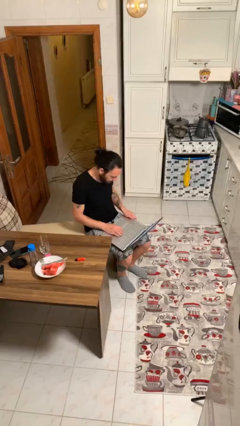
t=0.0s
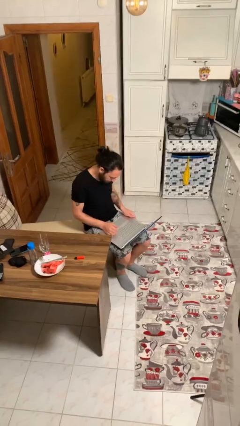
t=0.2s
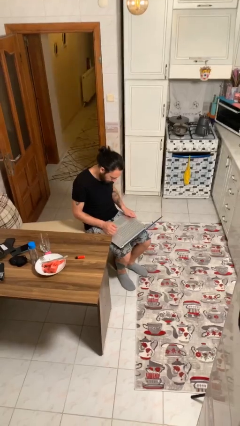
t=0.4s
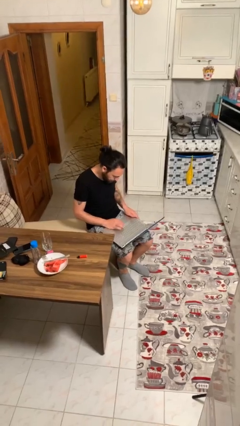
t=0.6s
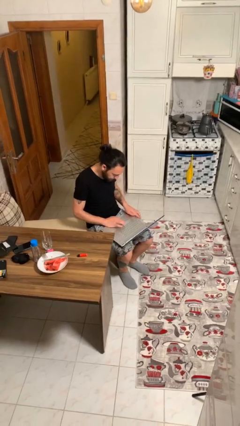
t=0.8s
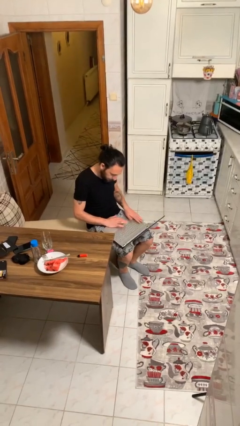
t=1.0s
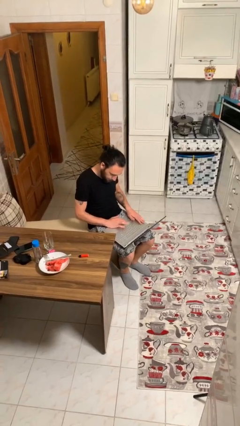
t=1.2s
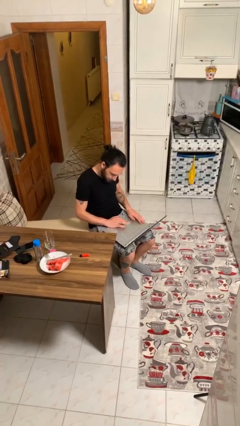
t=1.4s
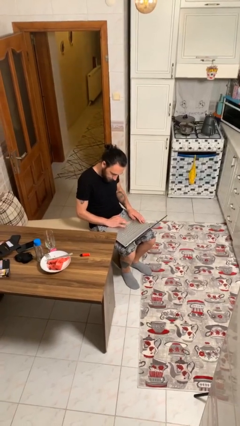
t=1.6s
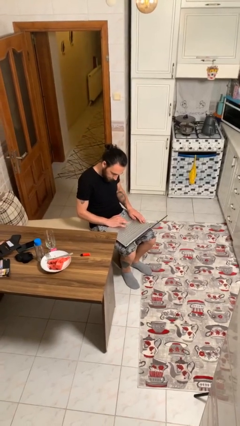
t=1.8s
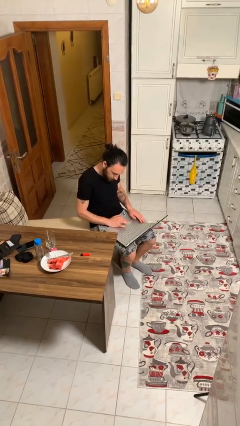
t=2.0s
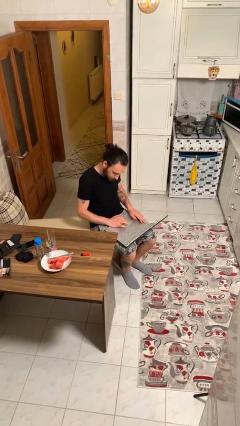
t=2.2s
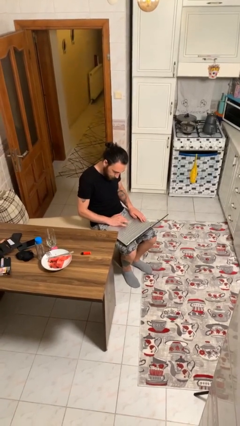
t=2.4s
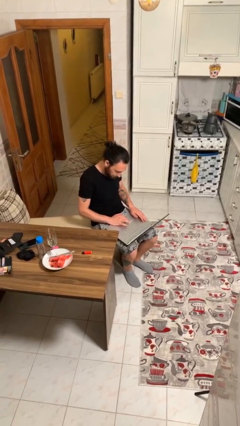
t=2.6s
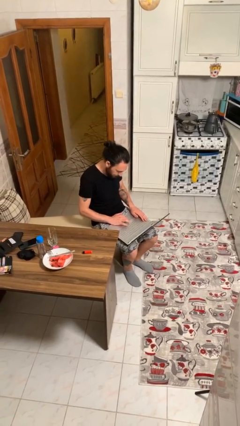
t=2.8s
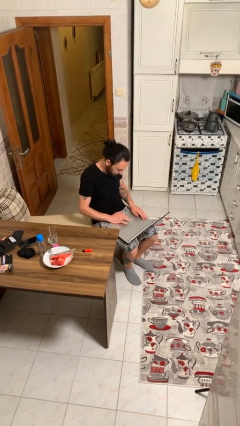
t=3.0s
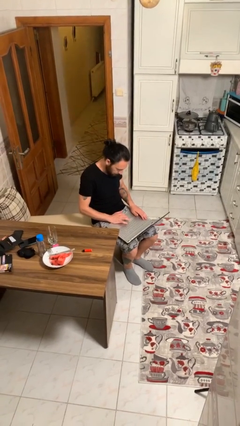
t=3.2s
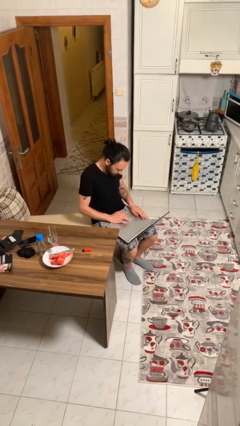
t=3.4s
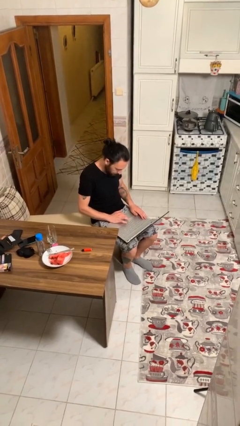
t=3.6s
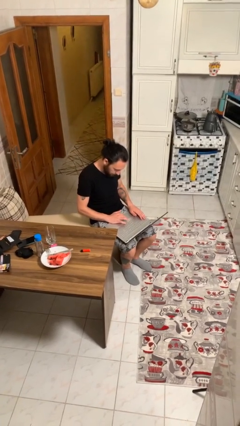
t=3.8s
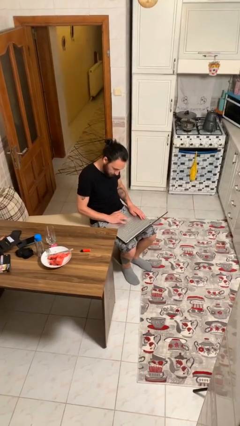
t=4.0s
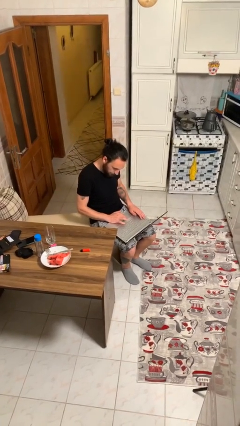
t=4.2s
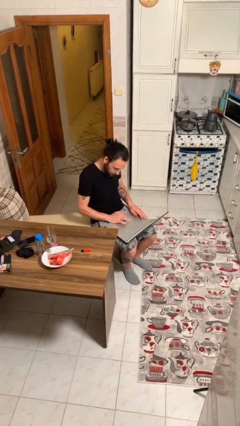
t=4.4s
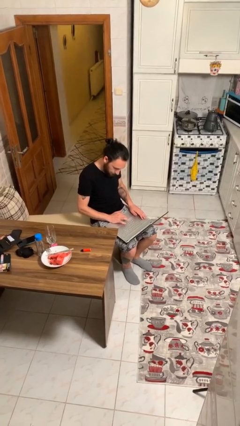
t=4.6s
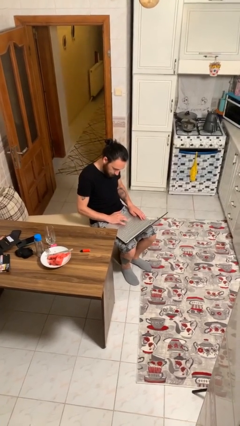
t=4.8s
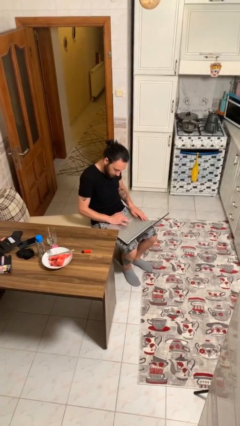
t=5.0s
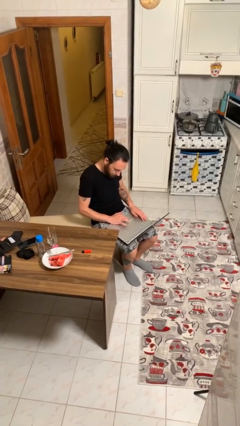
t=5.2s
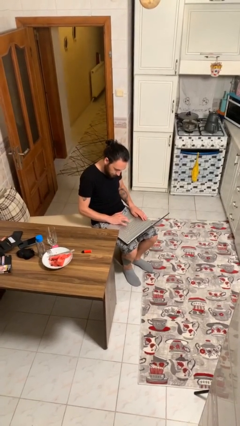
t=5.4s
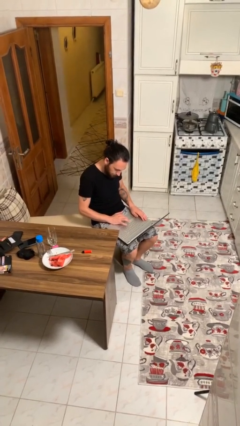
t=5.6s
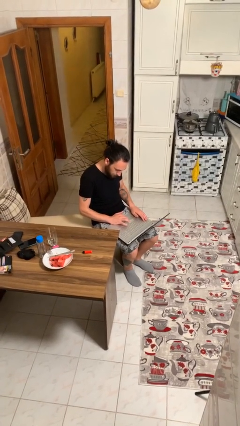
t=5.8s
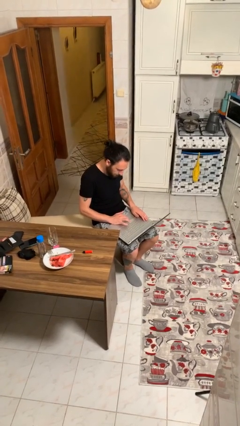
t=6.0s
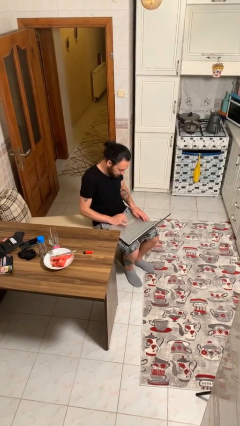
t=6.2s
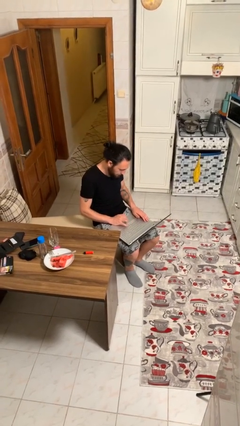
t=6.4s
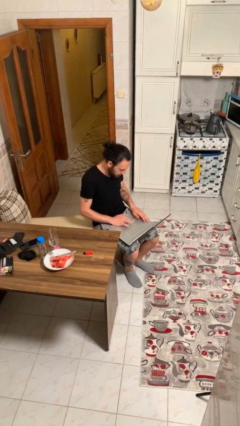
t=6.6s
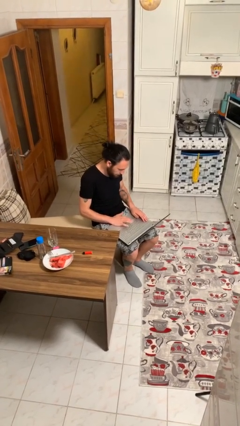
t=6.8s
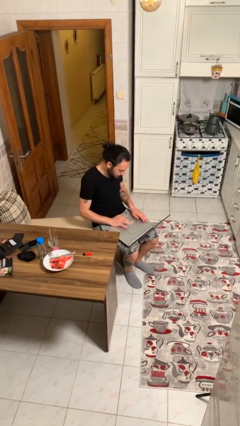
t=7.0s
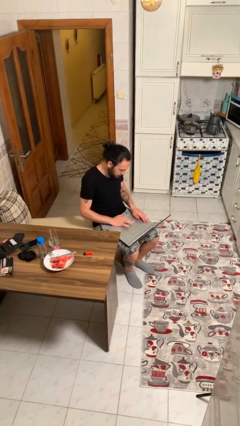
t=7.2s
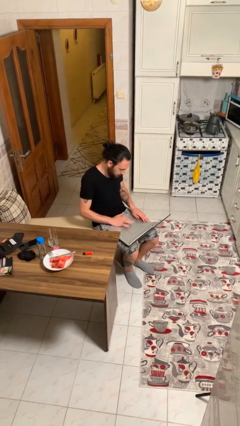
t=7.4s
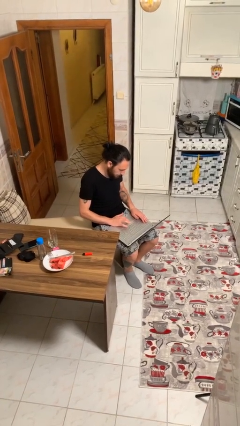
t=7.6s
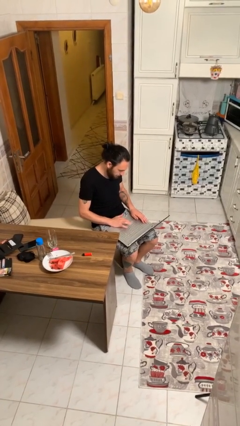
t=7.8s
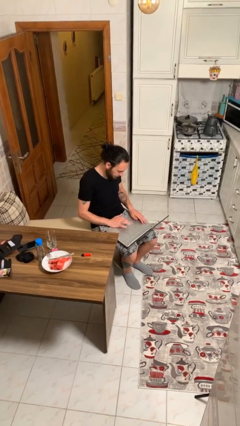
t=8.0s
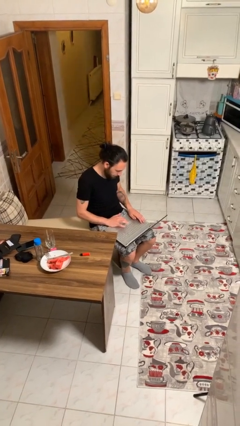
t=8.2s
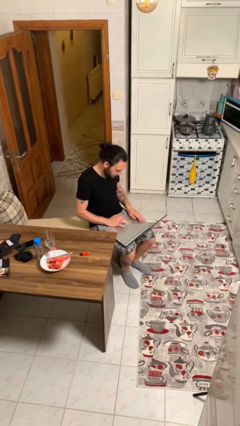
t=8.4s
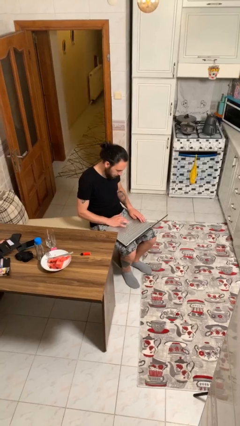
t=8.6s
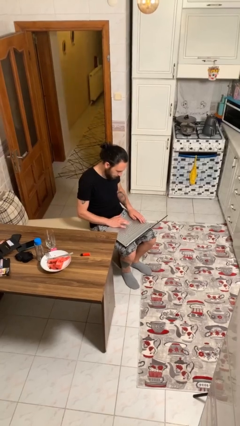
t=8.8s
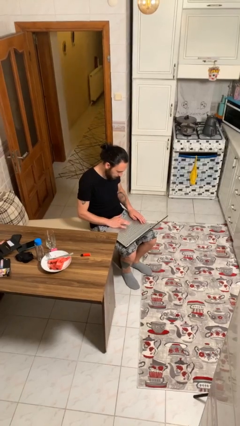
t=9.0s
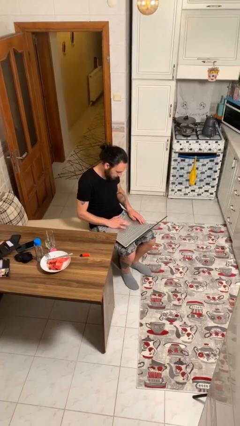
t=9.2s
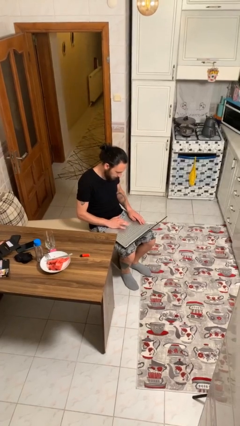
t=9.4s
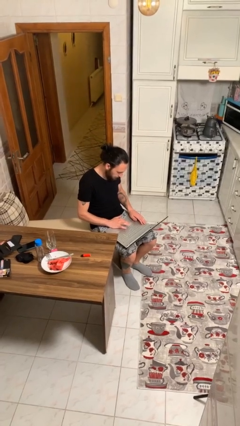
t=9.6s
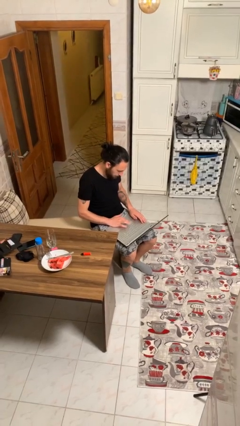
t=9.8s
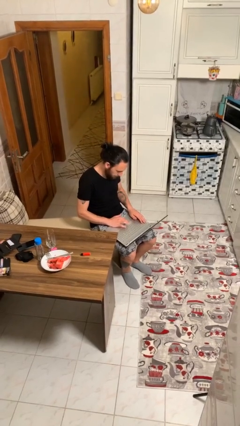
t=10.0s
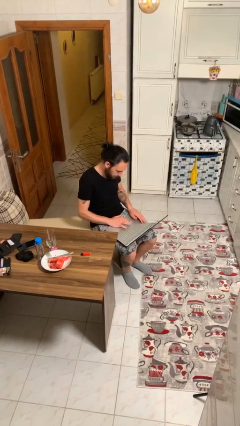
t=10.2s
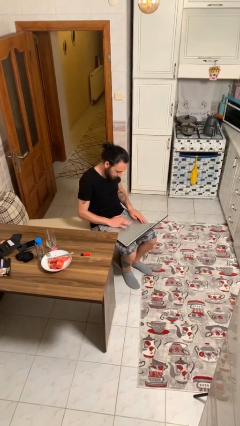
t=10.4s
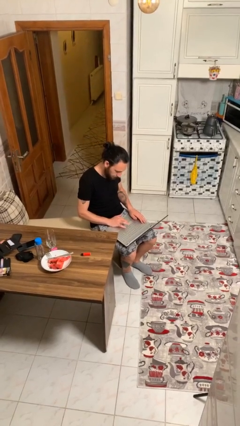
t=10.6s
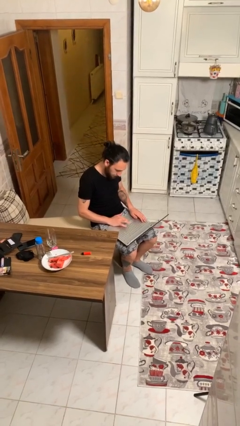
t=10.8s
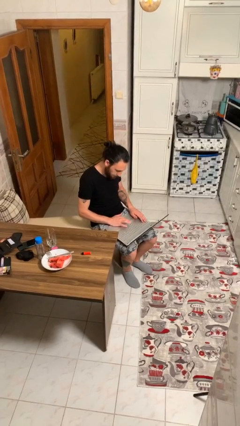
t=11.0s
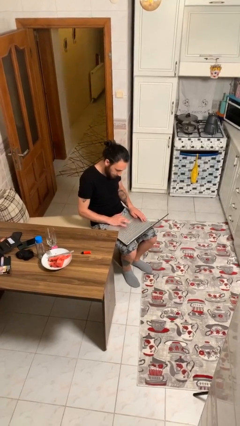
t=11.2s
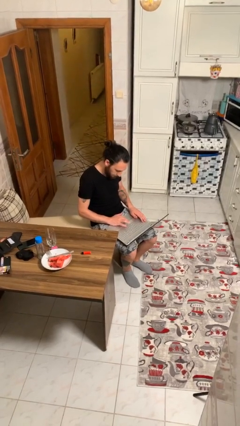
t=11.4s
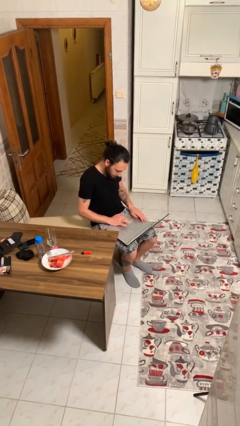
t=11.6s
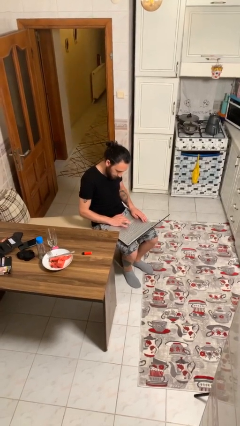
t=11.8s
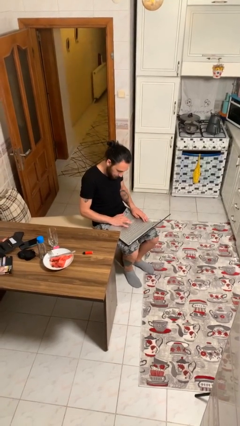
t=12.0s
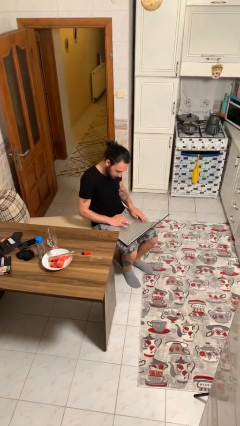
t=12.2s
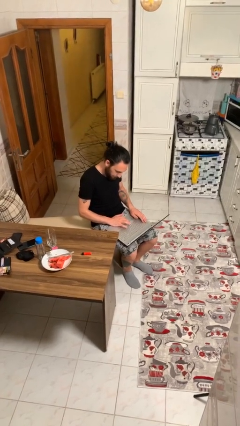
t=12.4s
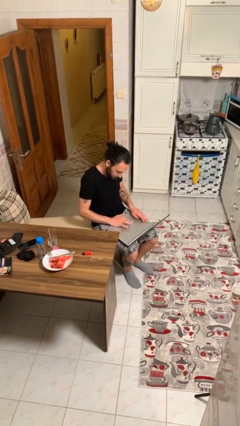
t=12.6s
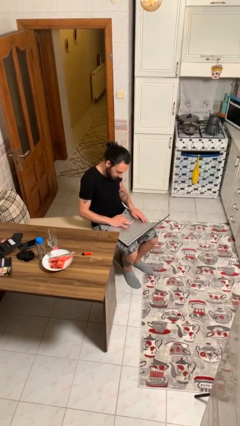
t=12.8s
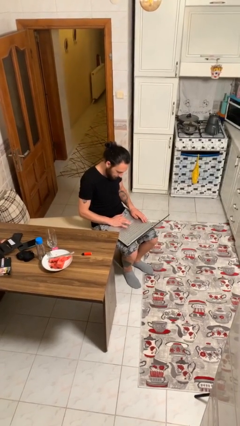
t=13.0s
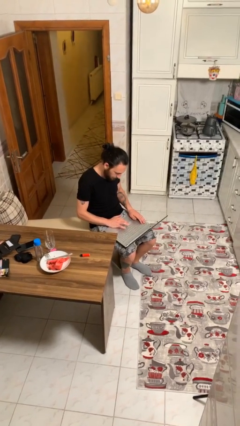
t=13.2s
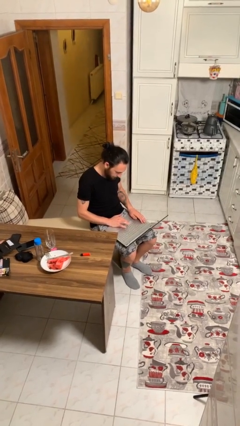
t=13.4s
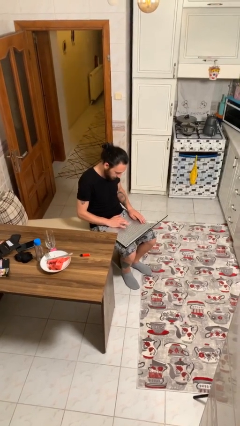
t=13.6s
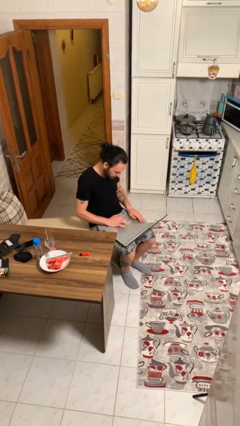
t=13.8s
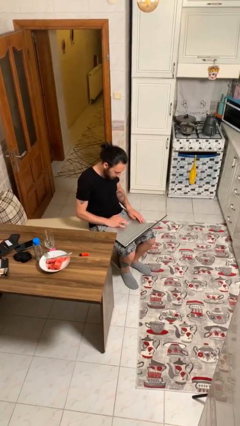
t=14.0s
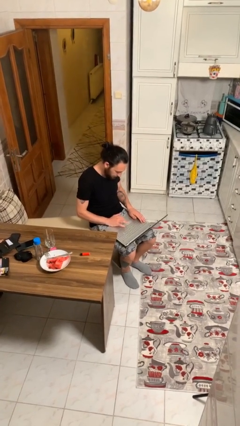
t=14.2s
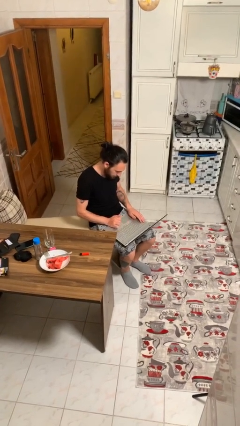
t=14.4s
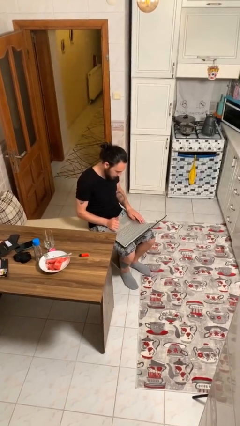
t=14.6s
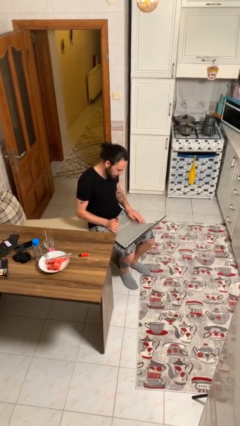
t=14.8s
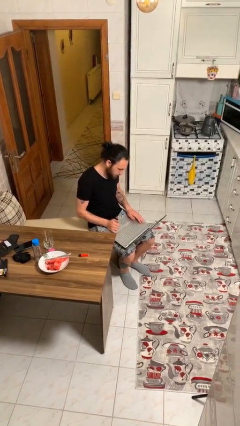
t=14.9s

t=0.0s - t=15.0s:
person interacts with laptop

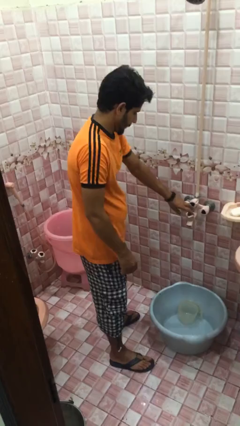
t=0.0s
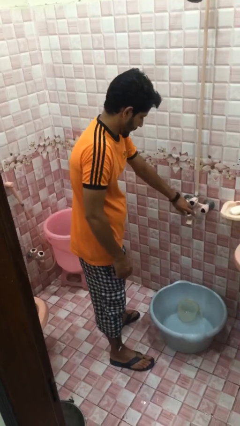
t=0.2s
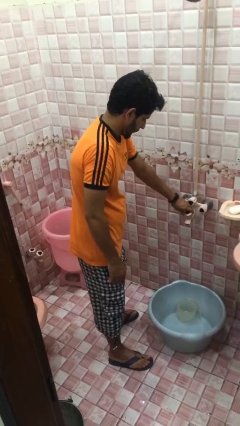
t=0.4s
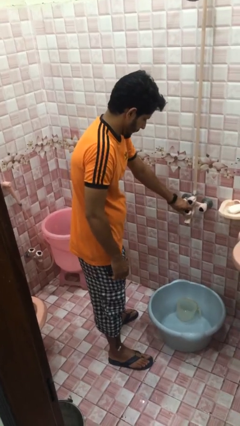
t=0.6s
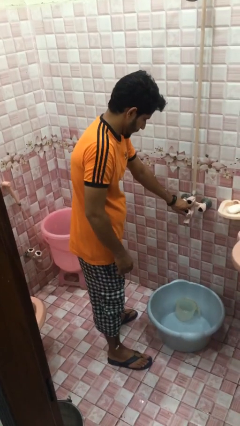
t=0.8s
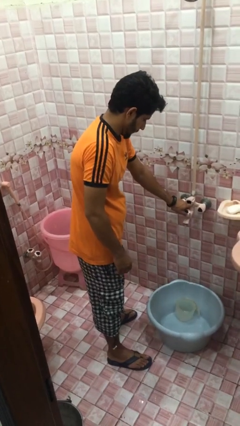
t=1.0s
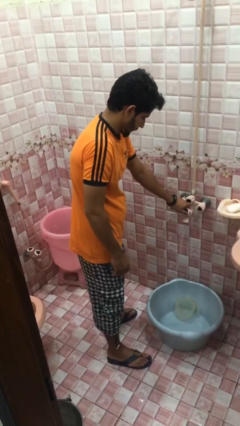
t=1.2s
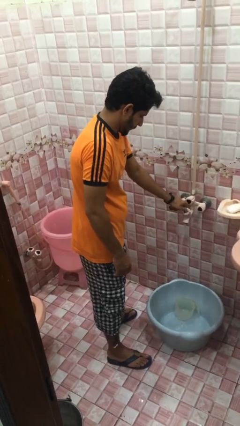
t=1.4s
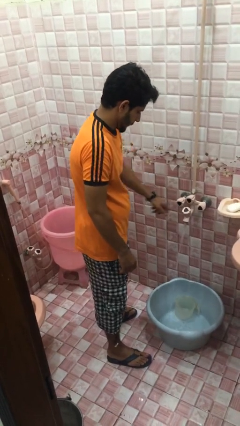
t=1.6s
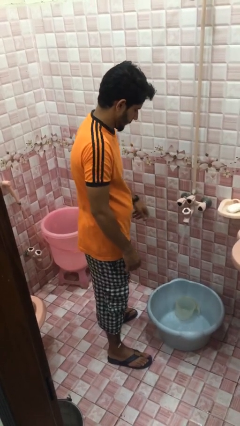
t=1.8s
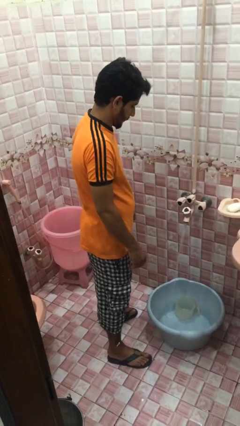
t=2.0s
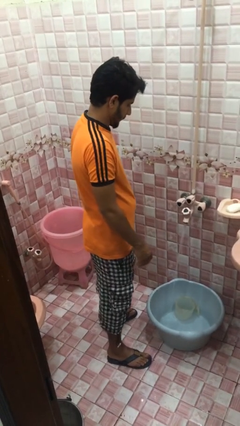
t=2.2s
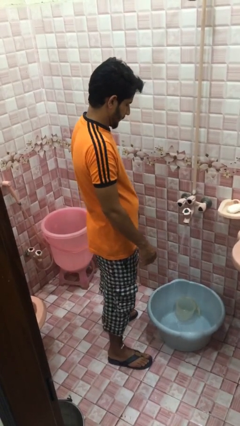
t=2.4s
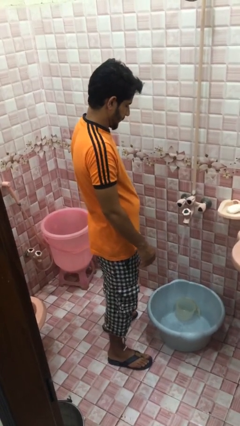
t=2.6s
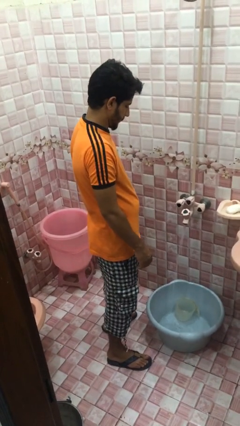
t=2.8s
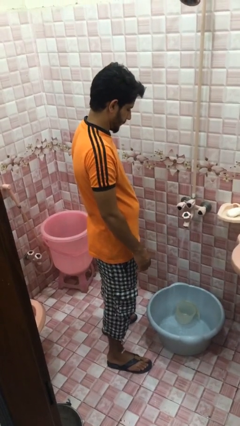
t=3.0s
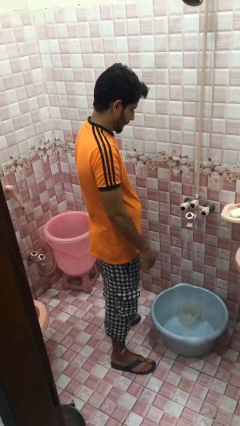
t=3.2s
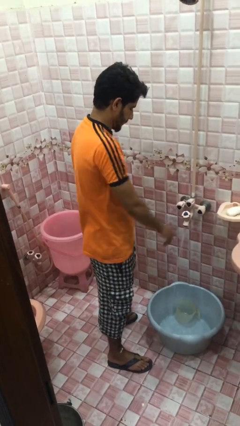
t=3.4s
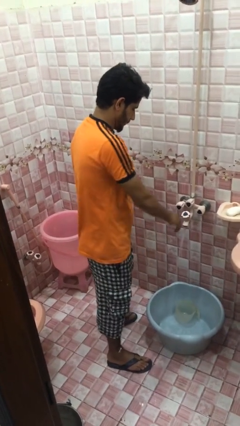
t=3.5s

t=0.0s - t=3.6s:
person turns on faucet

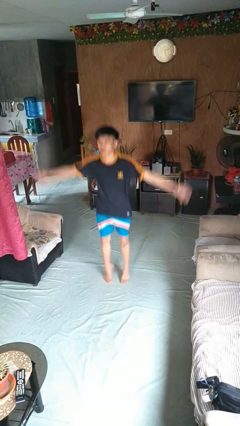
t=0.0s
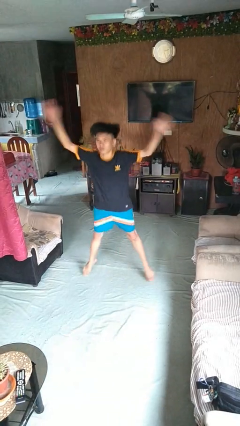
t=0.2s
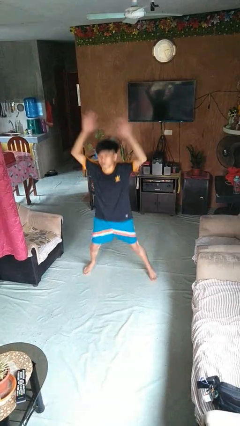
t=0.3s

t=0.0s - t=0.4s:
person exercises with jumping jacks
